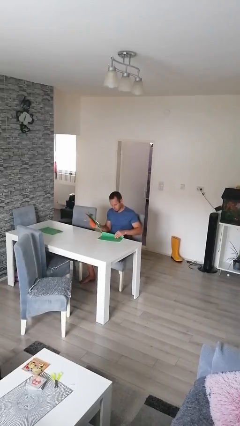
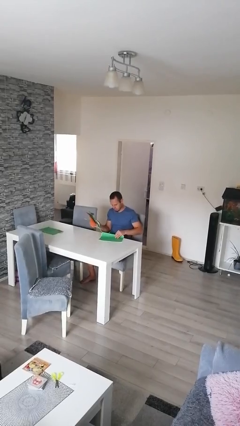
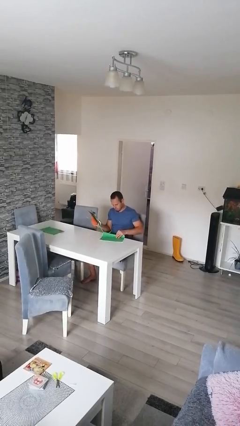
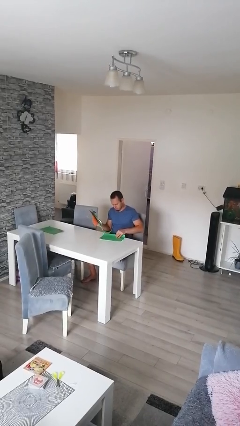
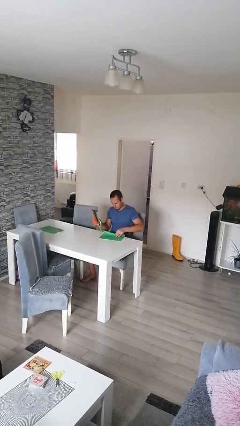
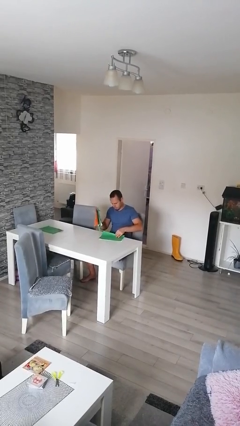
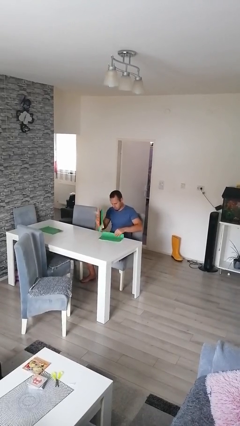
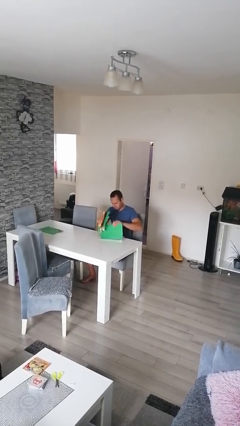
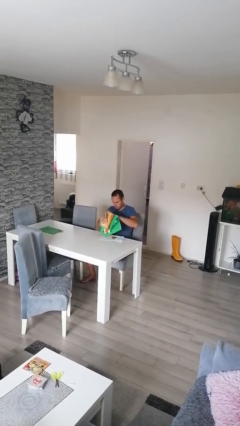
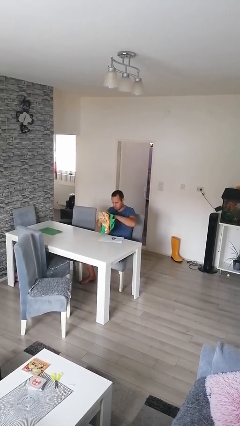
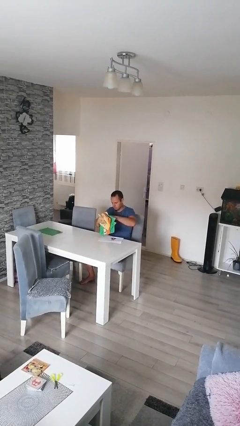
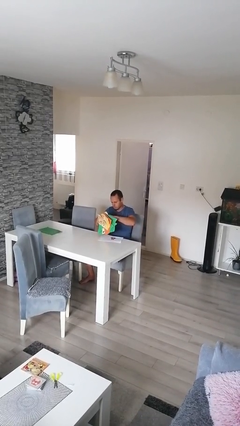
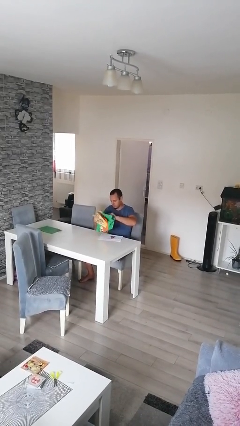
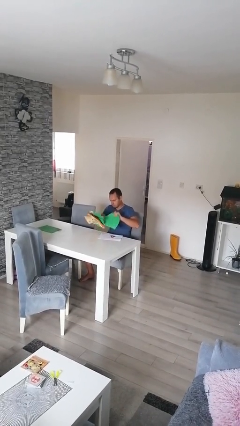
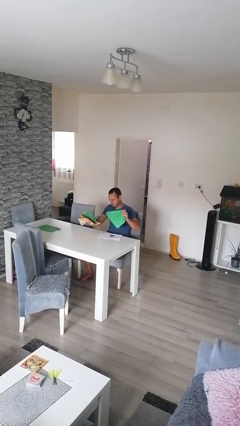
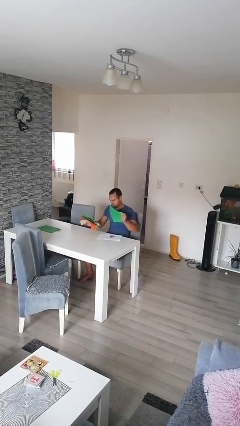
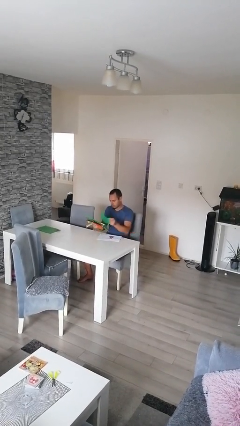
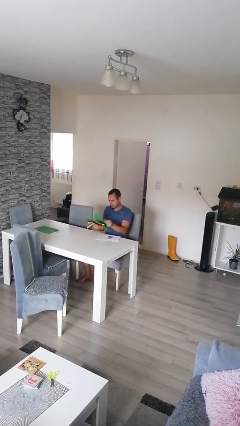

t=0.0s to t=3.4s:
person tears paper

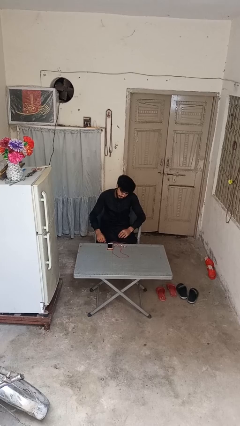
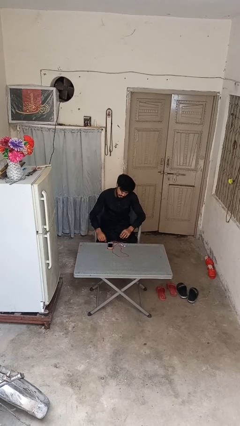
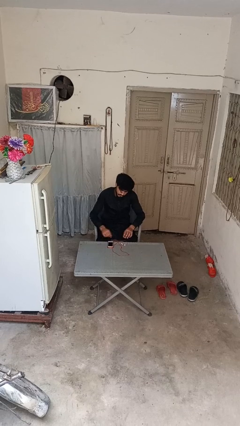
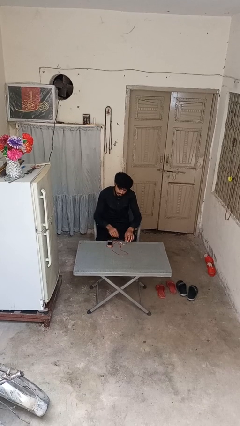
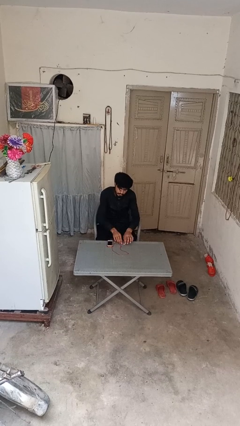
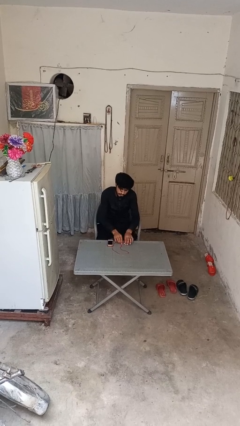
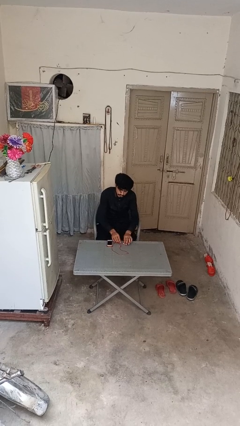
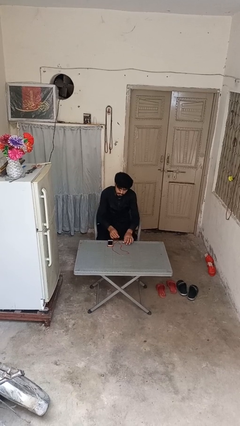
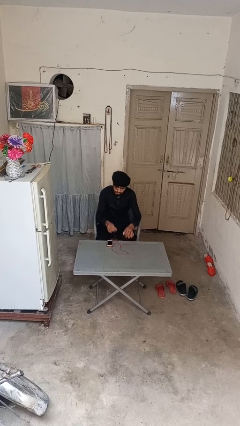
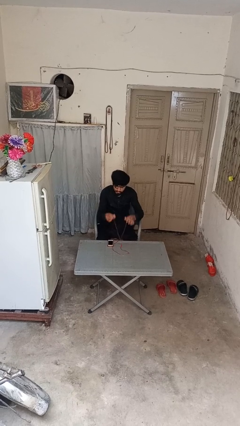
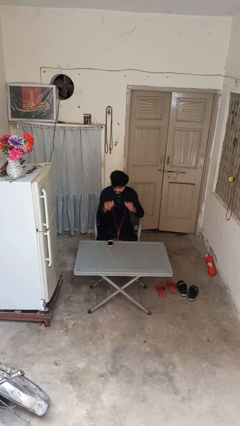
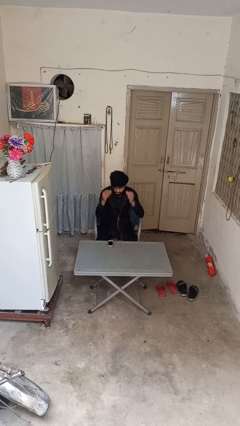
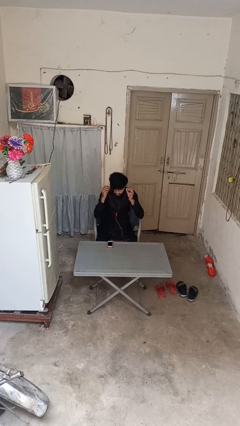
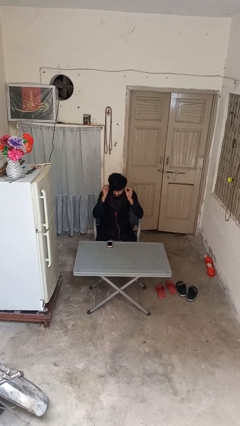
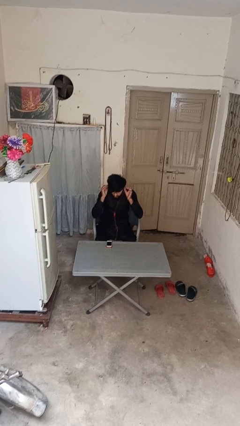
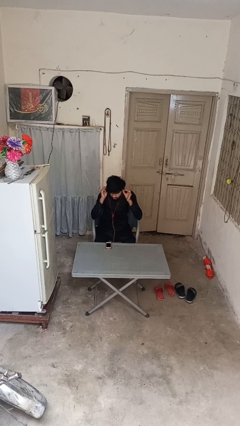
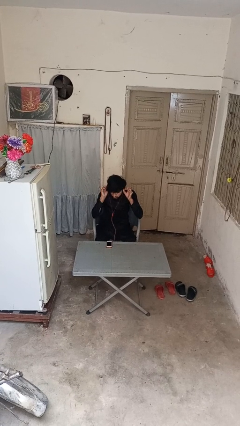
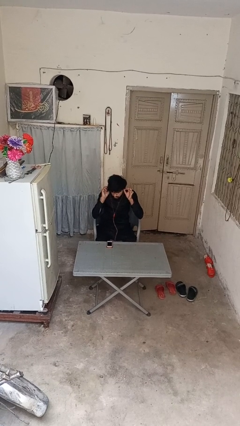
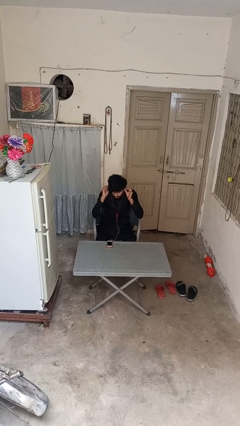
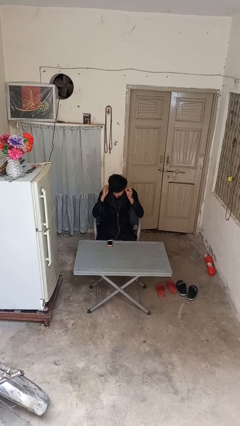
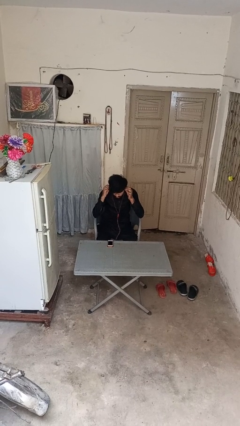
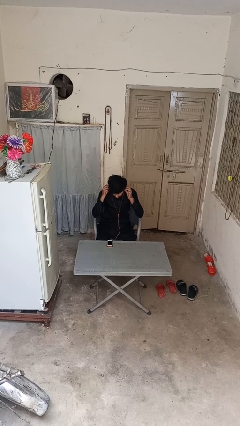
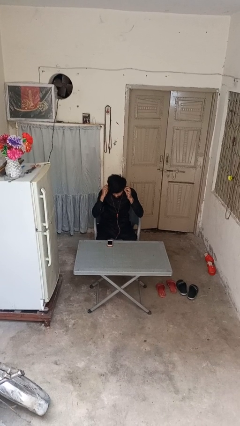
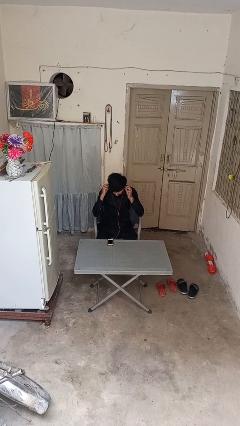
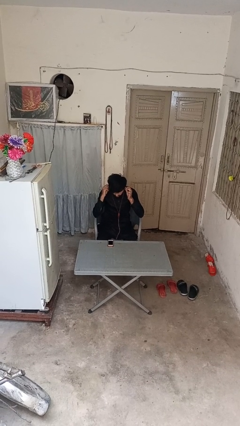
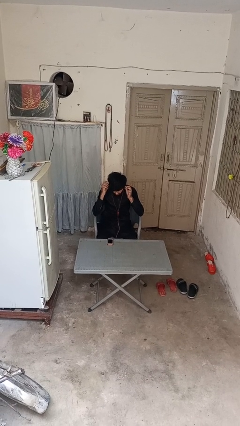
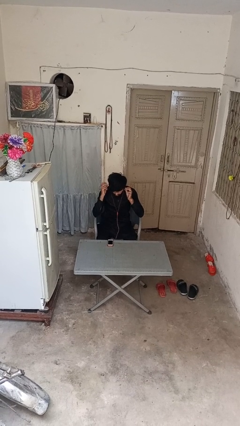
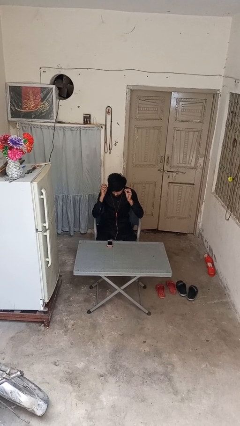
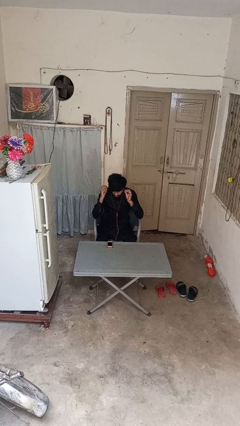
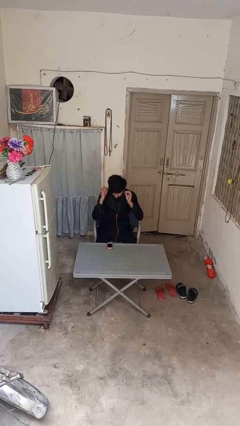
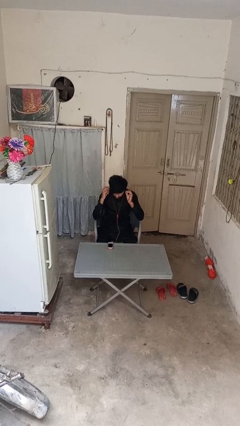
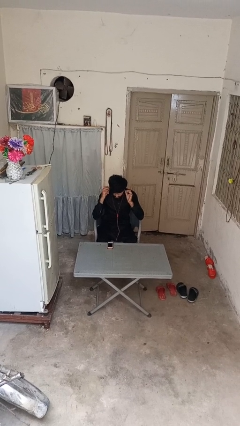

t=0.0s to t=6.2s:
person puts on headphones

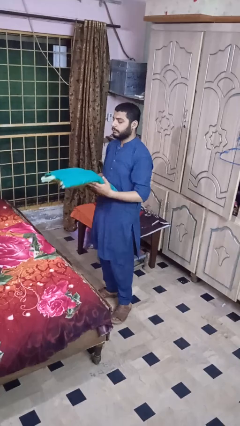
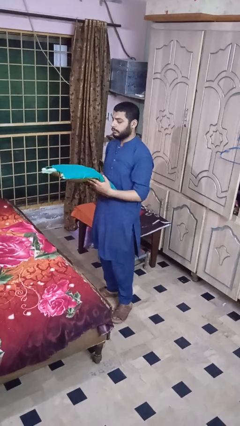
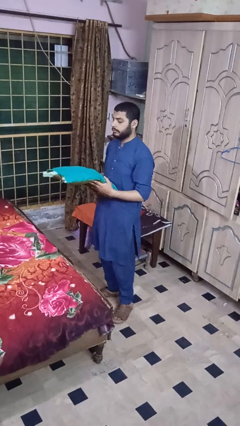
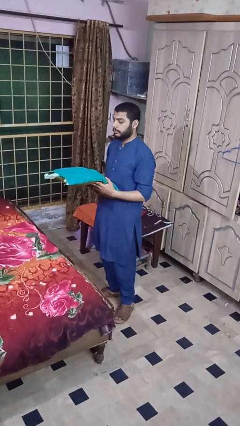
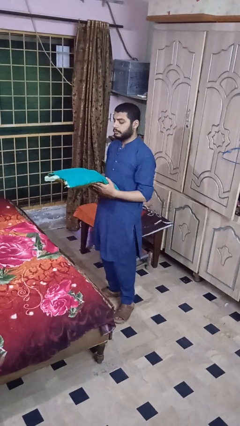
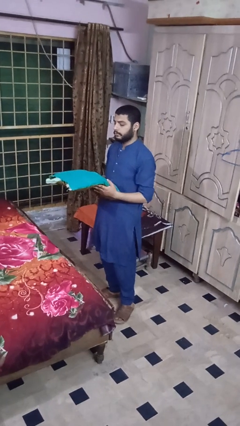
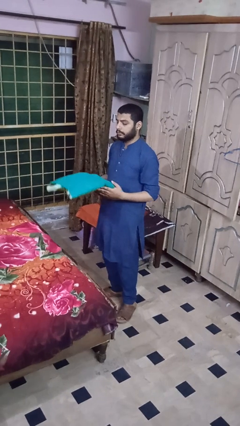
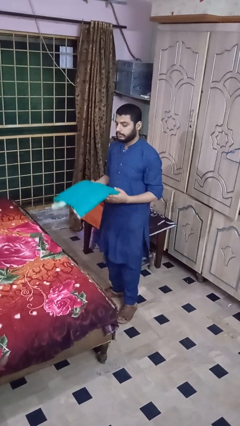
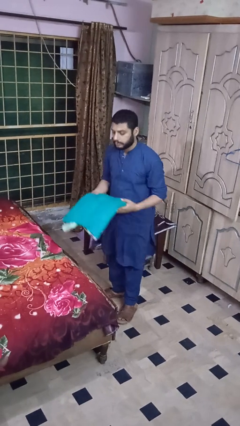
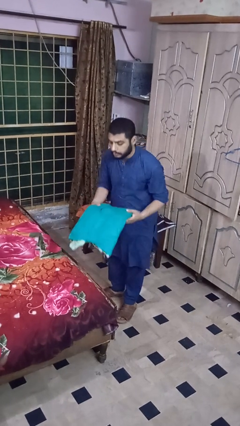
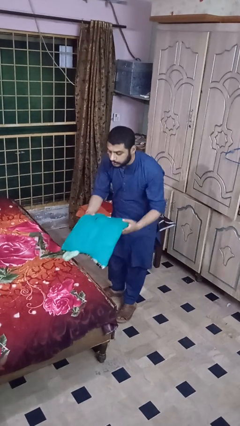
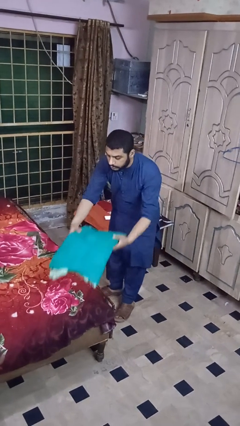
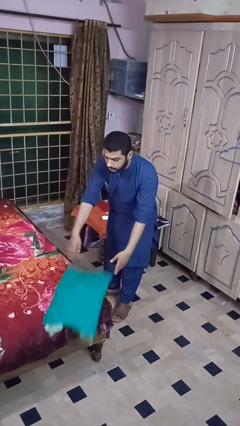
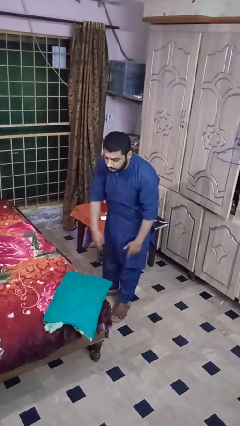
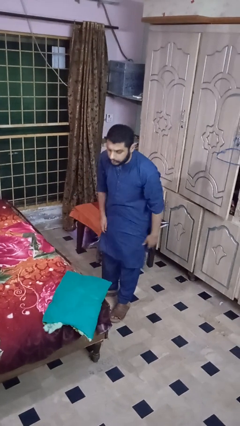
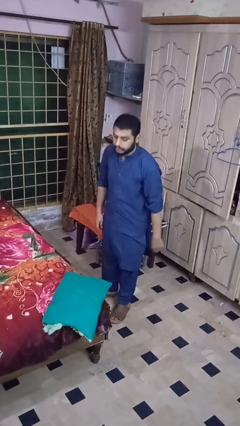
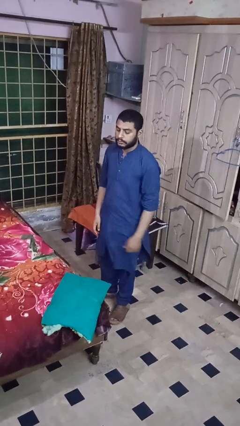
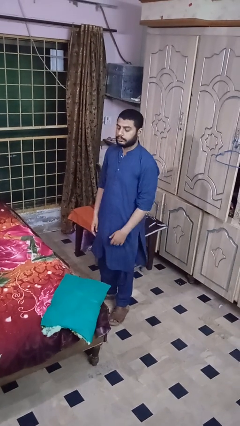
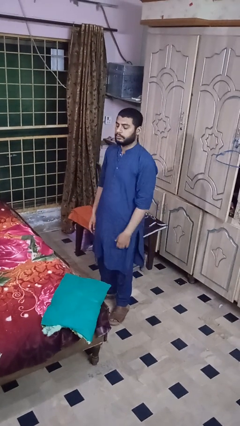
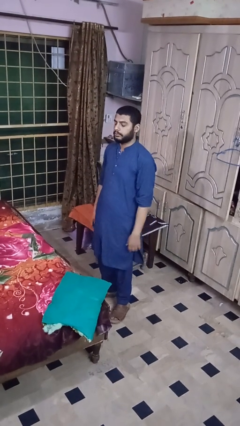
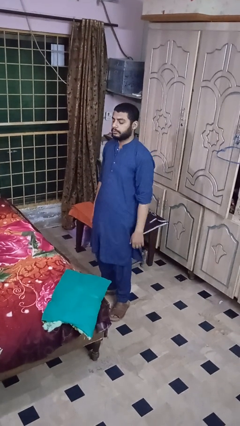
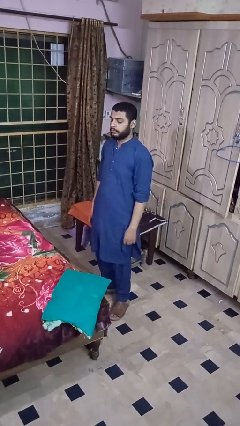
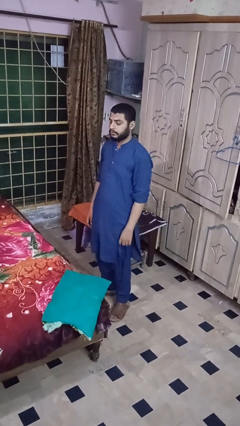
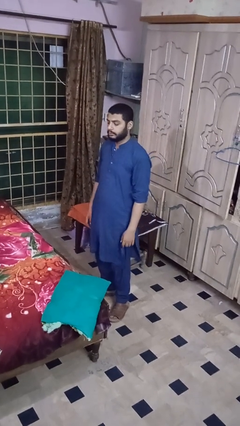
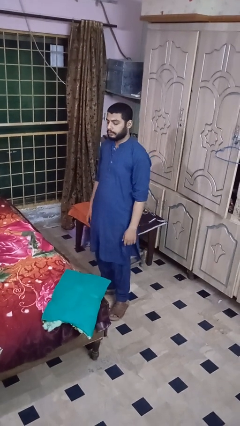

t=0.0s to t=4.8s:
person puts down object on bed

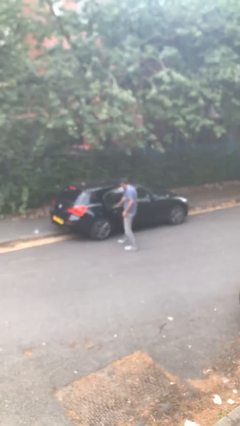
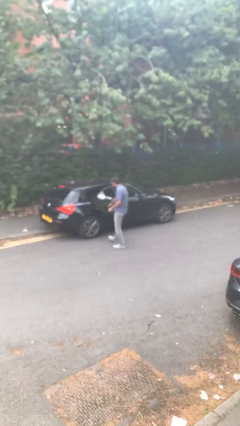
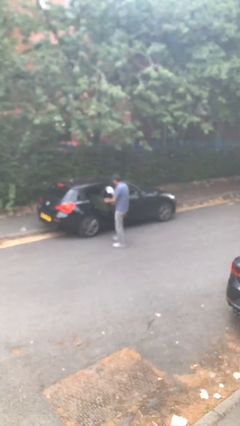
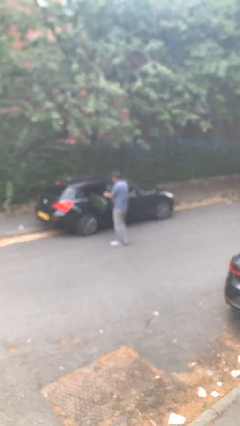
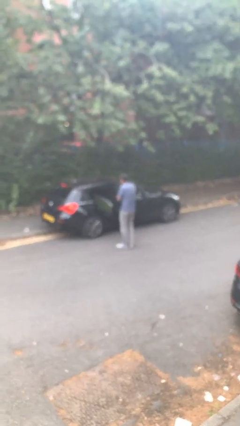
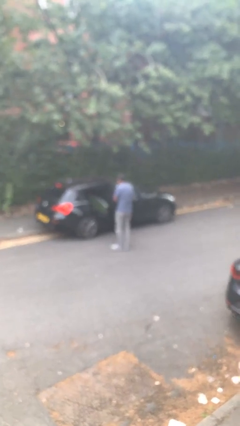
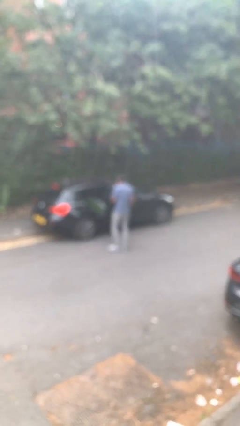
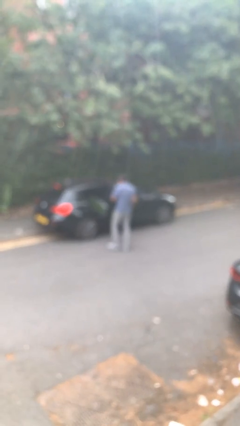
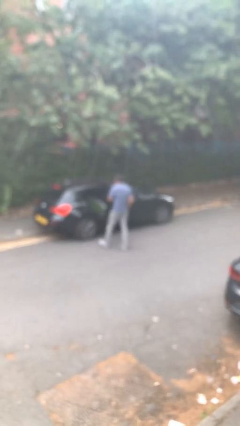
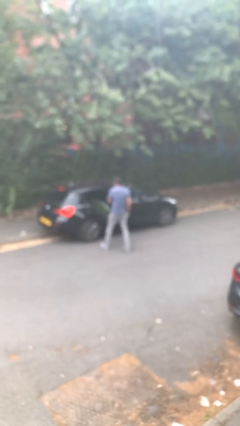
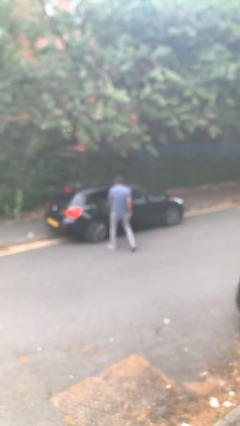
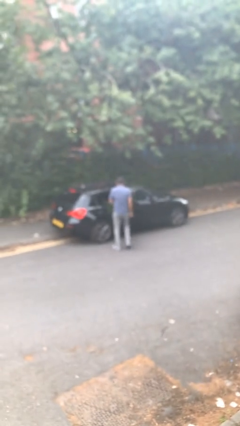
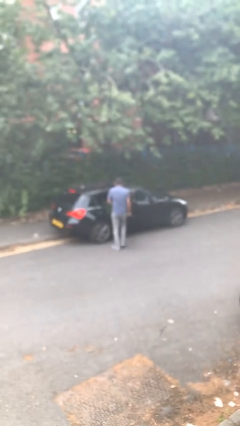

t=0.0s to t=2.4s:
person opens car door

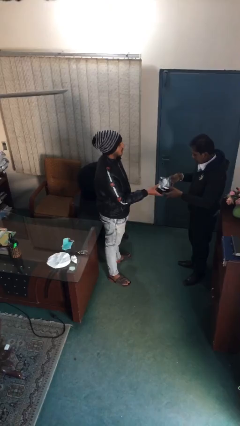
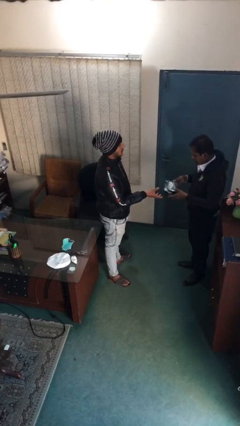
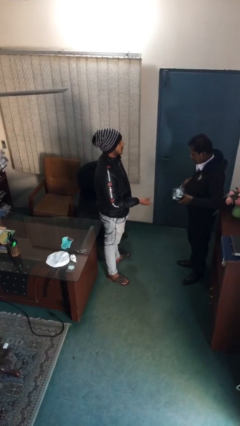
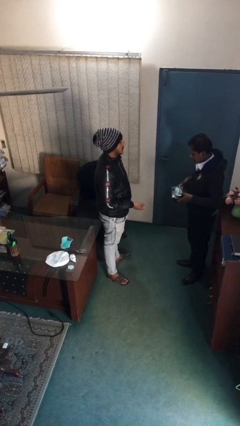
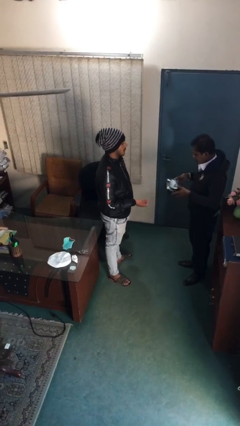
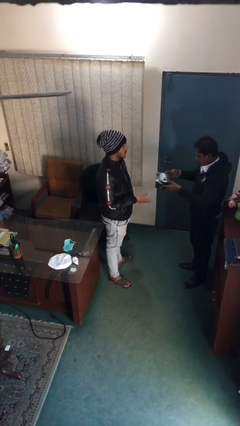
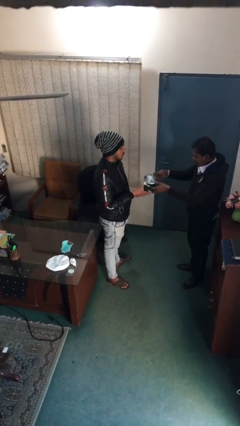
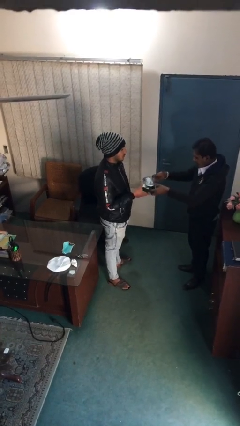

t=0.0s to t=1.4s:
person transfers object to person
